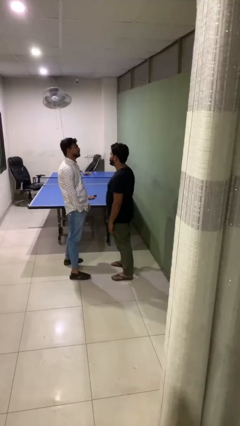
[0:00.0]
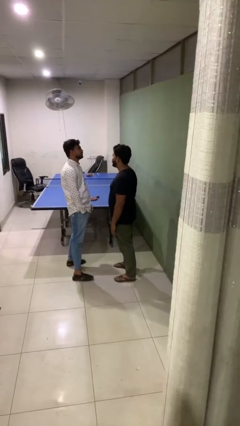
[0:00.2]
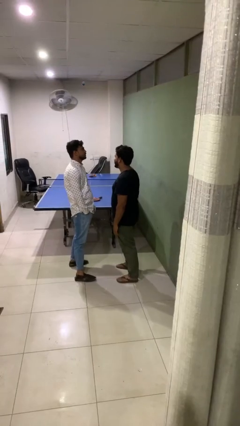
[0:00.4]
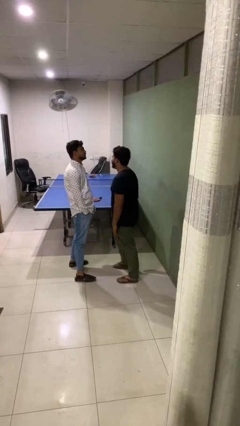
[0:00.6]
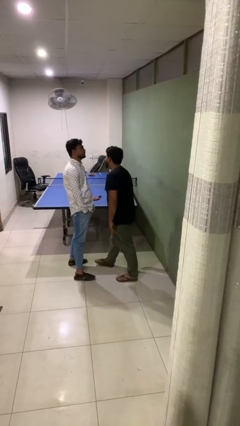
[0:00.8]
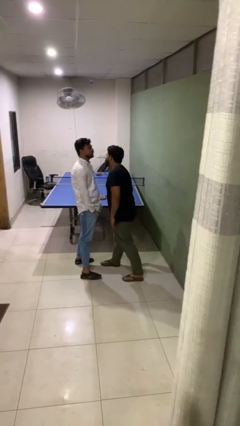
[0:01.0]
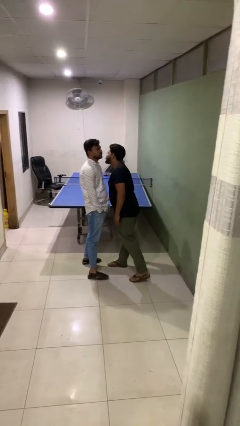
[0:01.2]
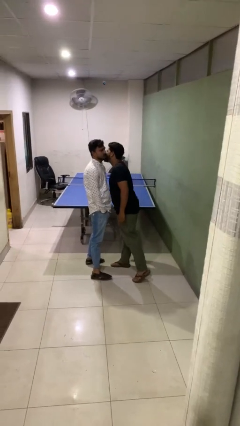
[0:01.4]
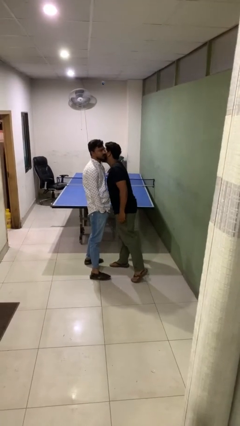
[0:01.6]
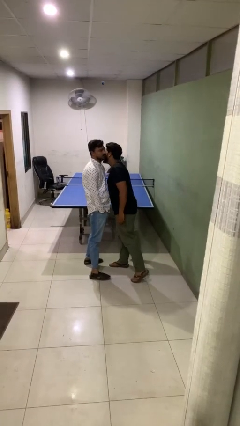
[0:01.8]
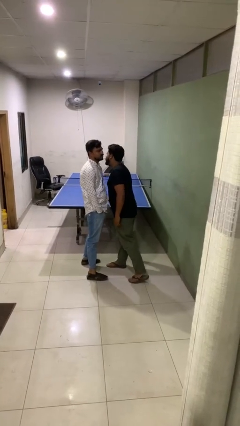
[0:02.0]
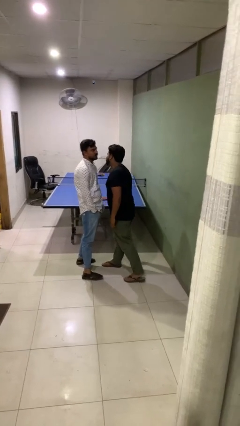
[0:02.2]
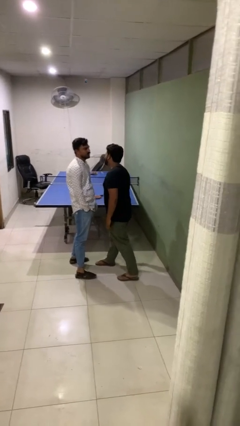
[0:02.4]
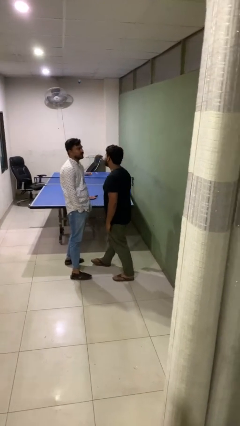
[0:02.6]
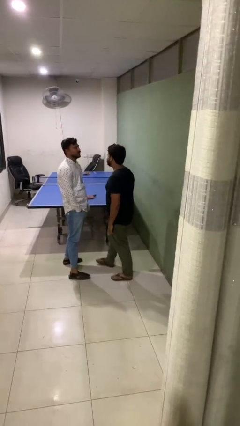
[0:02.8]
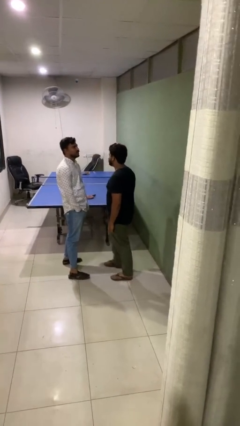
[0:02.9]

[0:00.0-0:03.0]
person kisses cheek of person

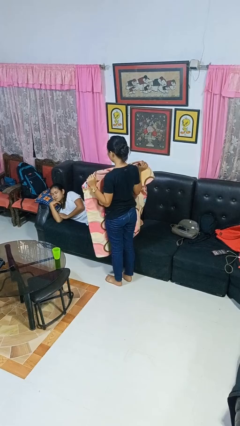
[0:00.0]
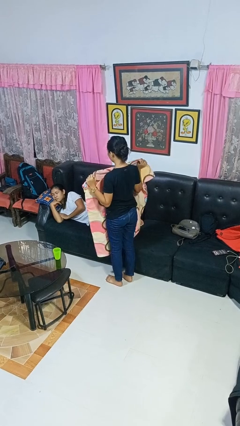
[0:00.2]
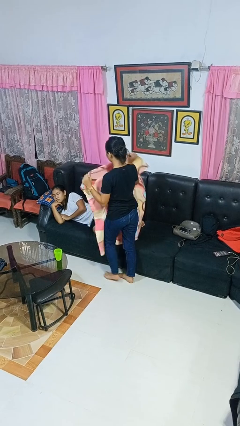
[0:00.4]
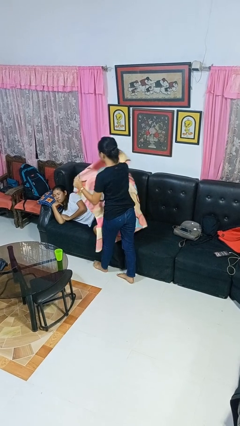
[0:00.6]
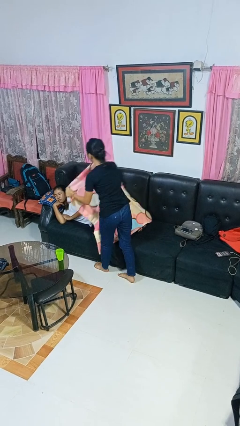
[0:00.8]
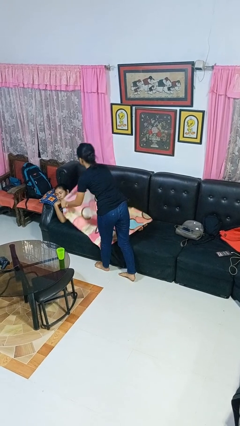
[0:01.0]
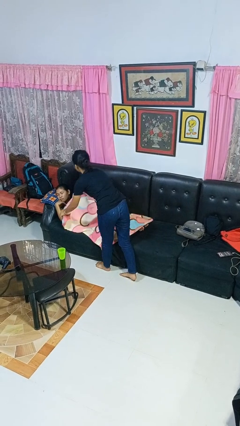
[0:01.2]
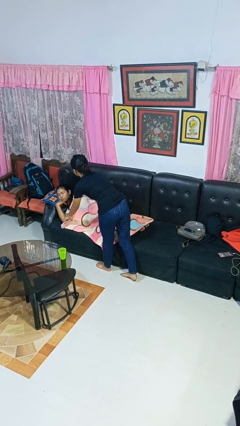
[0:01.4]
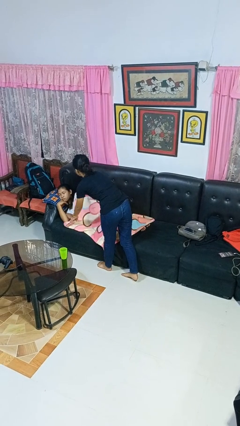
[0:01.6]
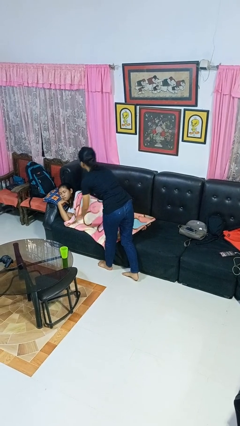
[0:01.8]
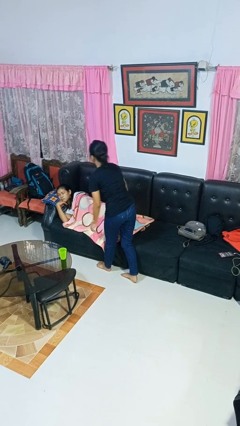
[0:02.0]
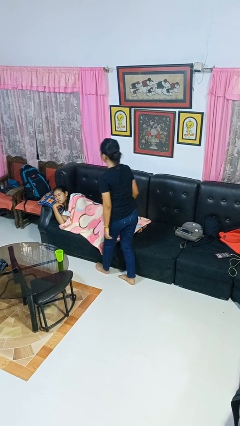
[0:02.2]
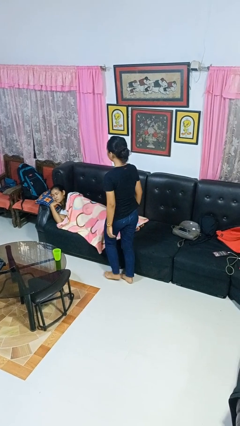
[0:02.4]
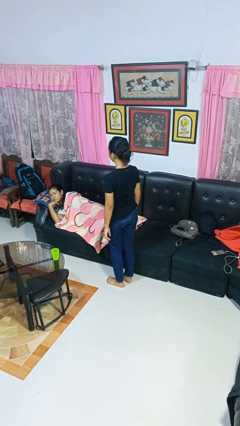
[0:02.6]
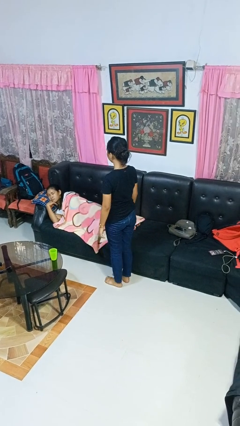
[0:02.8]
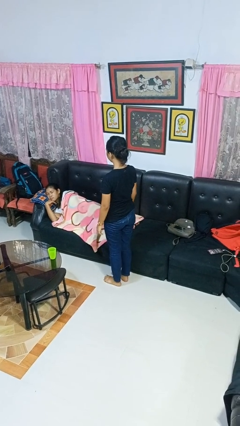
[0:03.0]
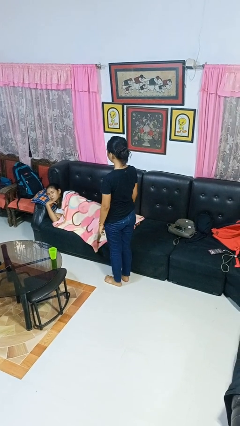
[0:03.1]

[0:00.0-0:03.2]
person covers friend with blanket

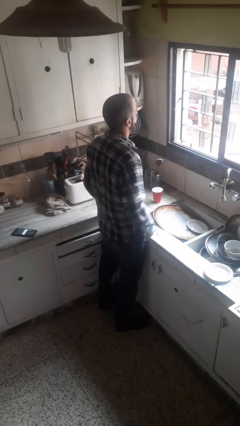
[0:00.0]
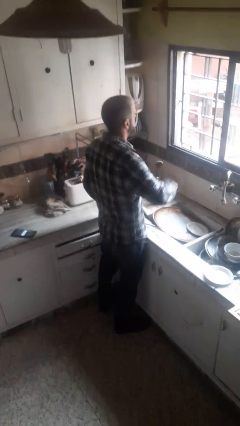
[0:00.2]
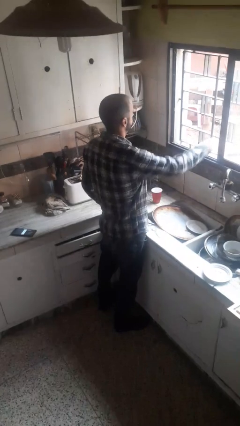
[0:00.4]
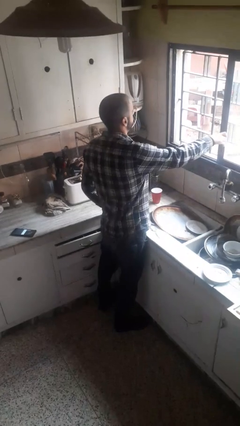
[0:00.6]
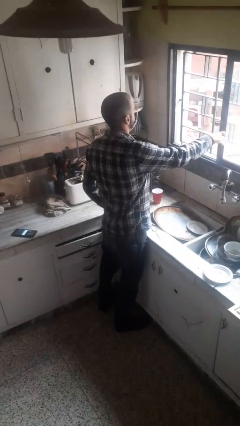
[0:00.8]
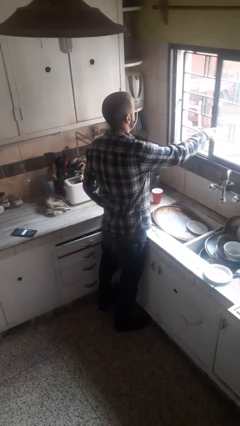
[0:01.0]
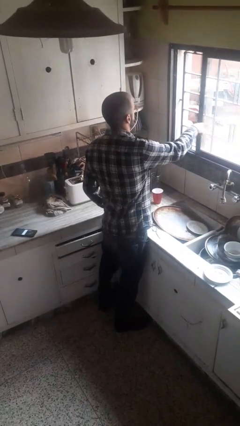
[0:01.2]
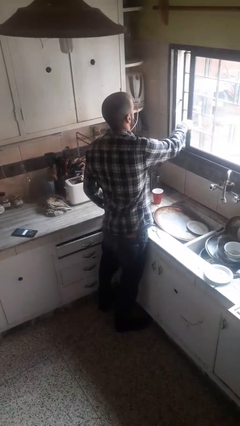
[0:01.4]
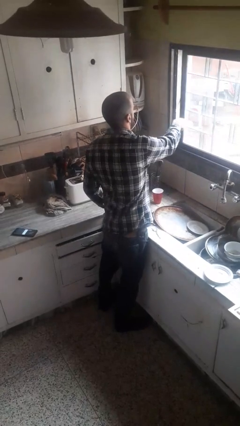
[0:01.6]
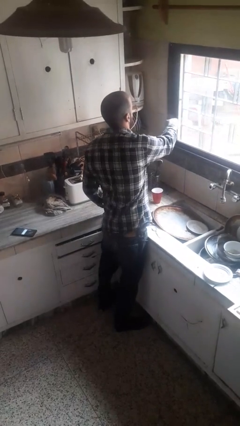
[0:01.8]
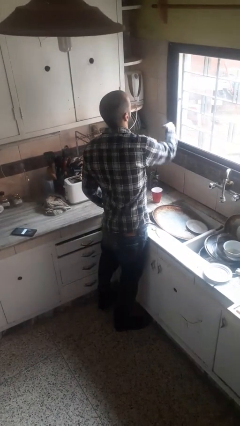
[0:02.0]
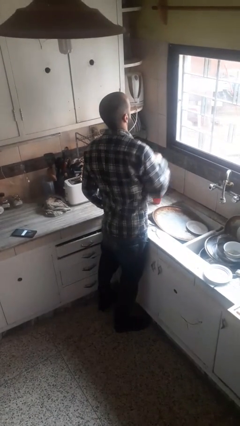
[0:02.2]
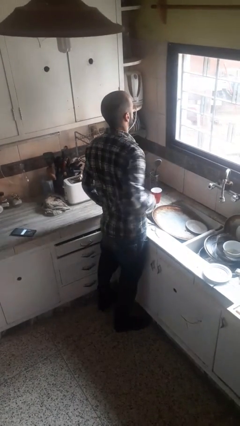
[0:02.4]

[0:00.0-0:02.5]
person closes home window

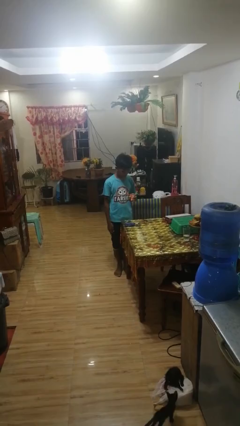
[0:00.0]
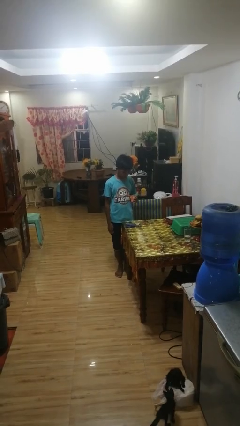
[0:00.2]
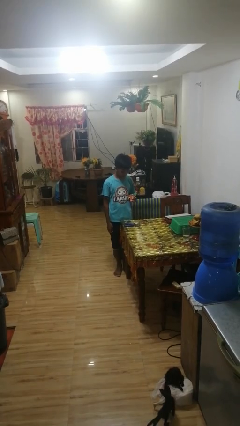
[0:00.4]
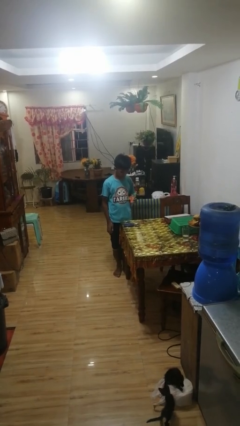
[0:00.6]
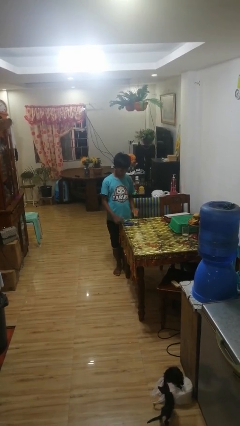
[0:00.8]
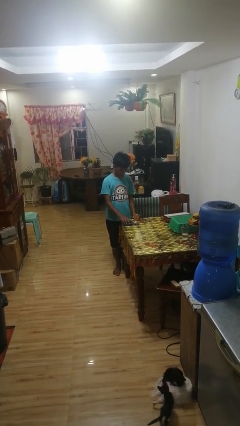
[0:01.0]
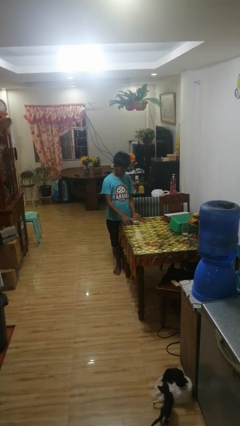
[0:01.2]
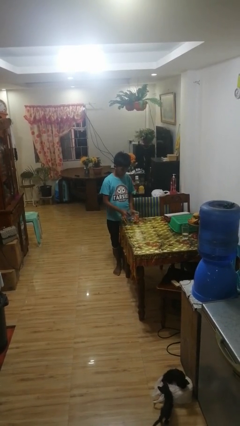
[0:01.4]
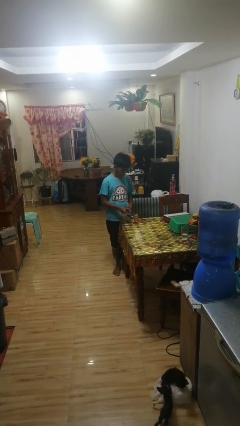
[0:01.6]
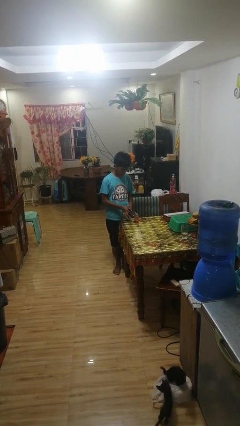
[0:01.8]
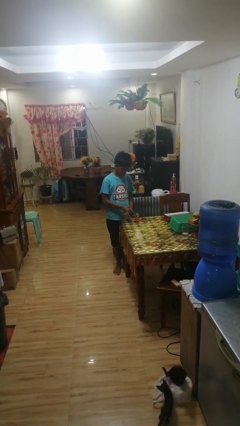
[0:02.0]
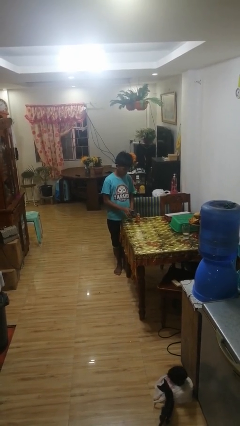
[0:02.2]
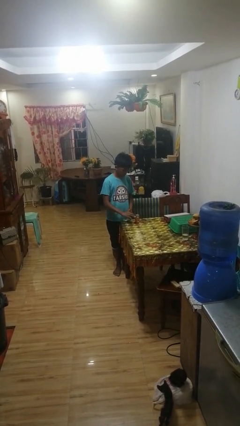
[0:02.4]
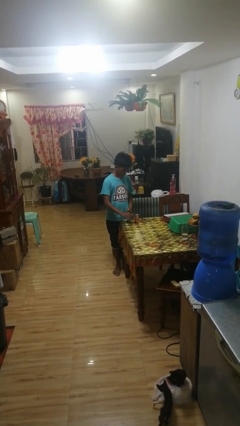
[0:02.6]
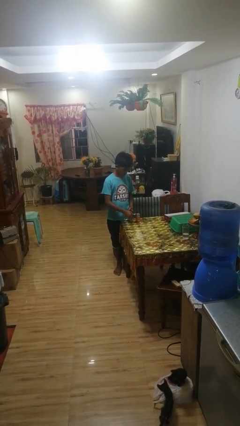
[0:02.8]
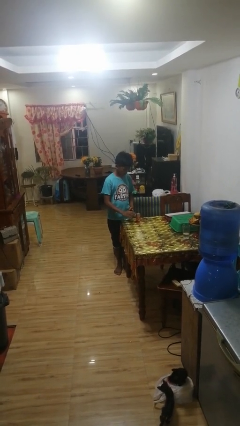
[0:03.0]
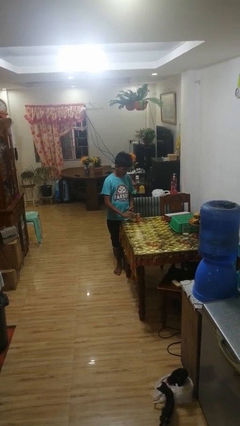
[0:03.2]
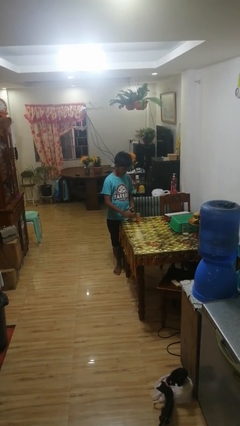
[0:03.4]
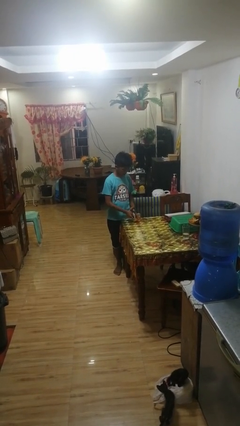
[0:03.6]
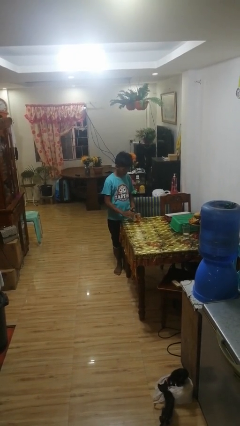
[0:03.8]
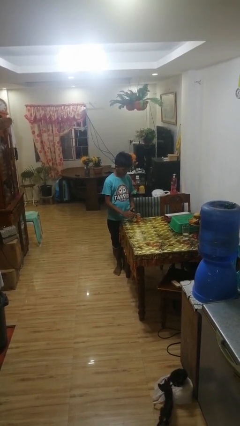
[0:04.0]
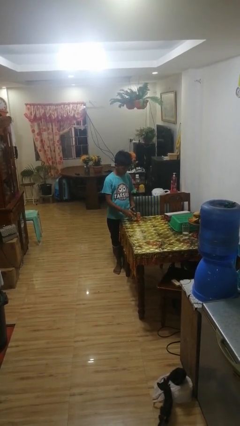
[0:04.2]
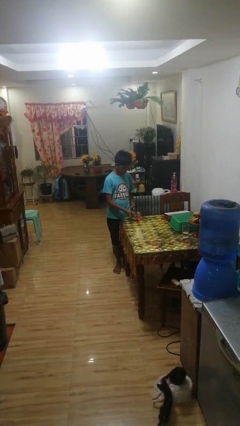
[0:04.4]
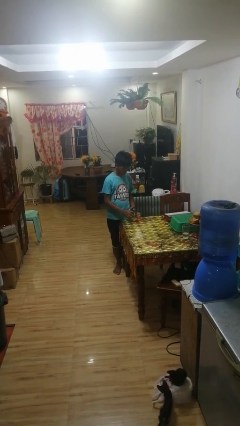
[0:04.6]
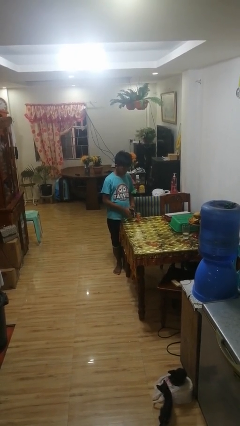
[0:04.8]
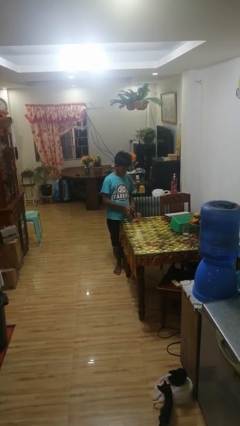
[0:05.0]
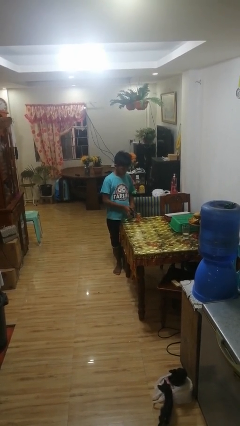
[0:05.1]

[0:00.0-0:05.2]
person opens can with can opener

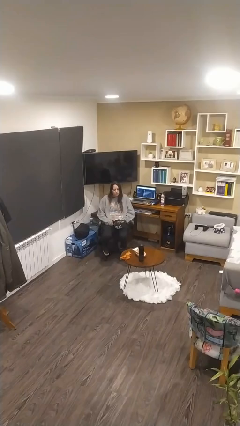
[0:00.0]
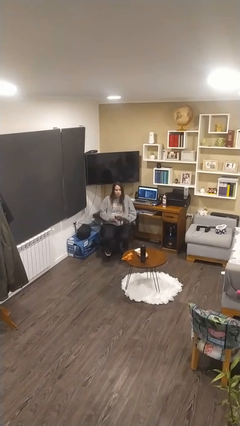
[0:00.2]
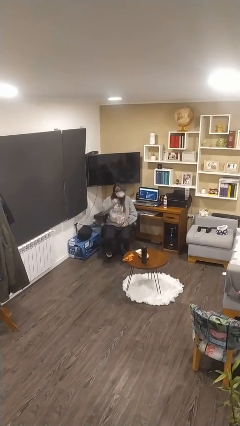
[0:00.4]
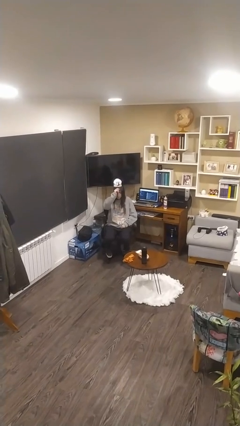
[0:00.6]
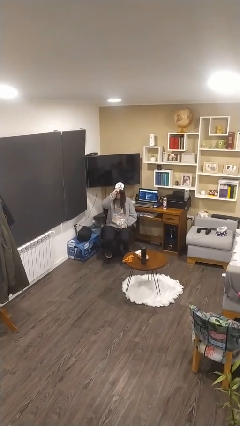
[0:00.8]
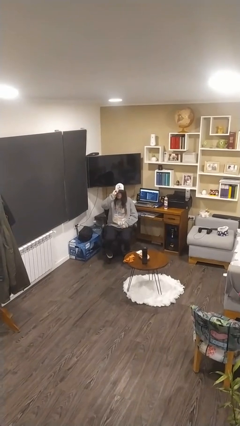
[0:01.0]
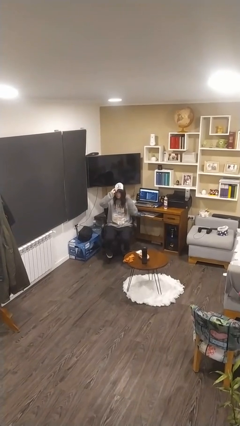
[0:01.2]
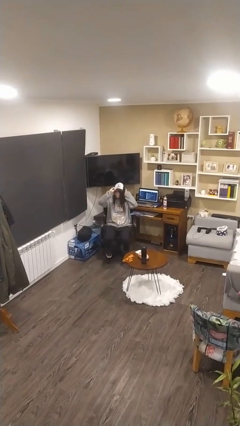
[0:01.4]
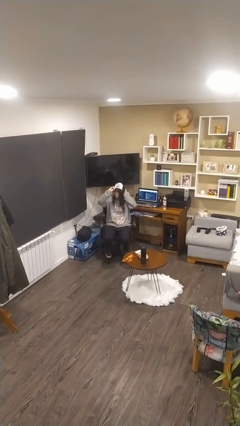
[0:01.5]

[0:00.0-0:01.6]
person puts on hat

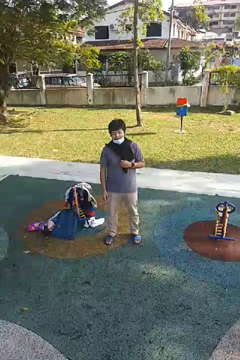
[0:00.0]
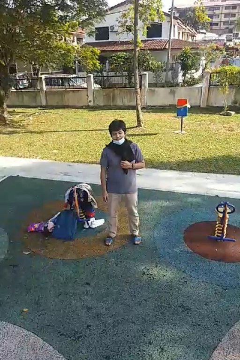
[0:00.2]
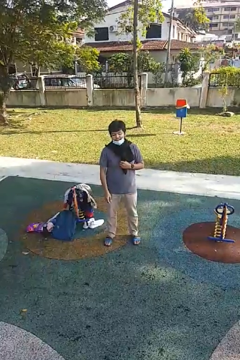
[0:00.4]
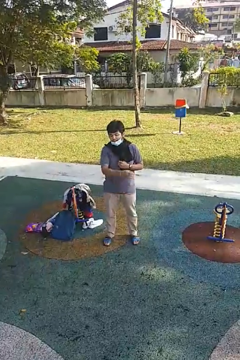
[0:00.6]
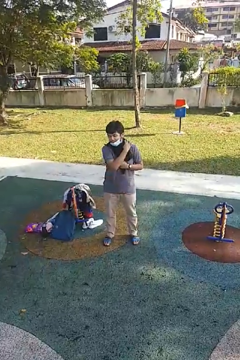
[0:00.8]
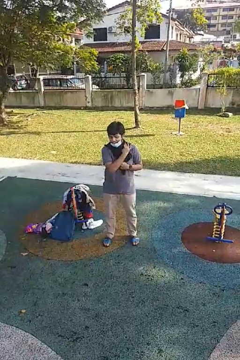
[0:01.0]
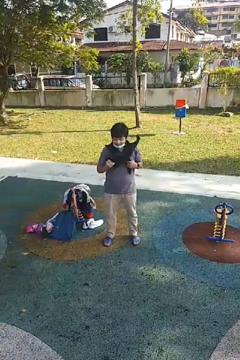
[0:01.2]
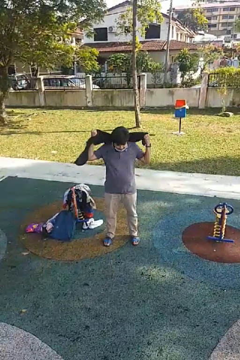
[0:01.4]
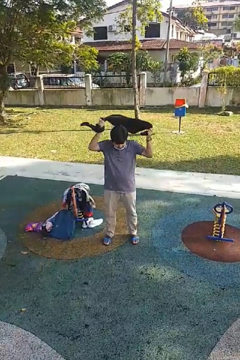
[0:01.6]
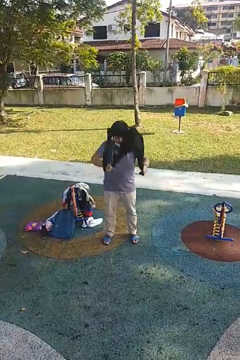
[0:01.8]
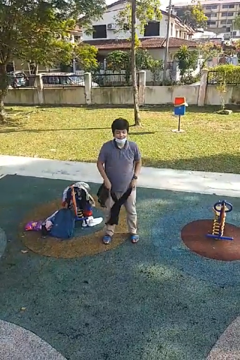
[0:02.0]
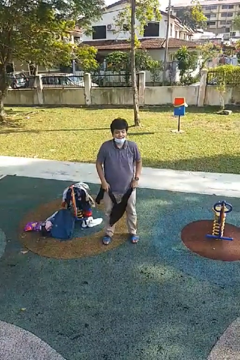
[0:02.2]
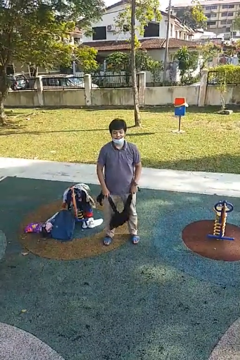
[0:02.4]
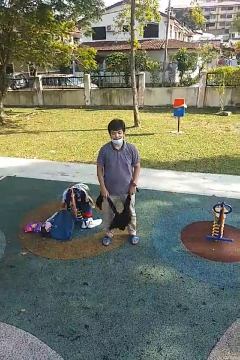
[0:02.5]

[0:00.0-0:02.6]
person takes off scarf
